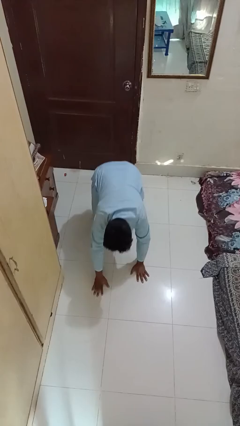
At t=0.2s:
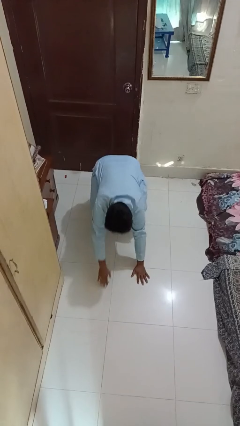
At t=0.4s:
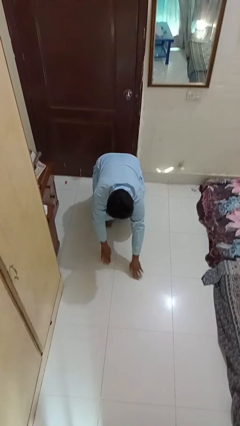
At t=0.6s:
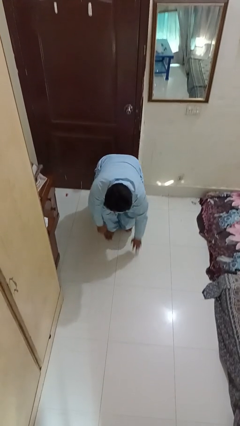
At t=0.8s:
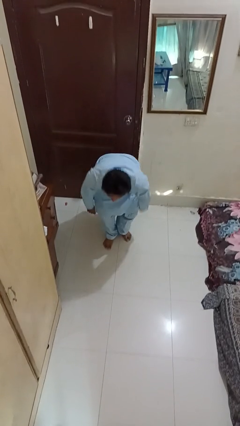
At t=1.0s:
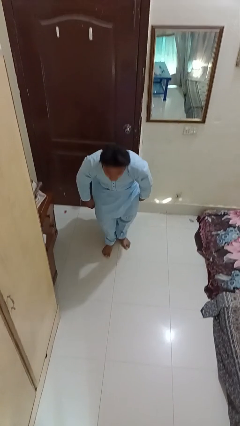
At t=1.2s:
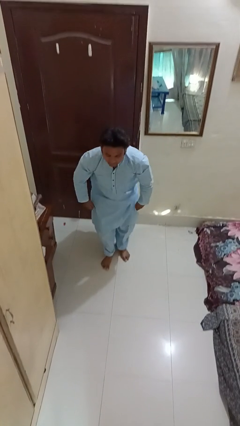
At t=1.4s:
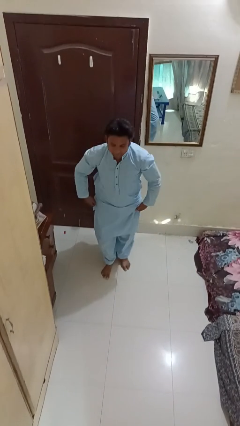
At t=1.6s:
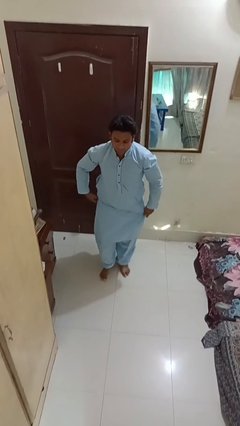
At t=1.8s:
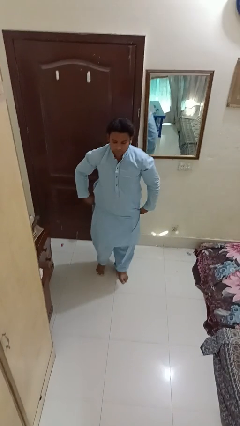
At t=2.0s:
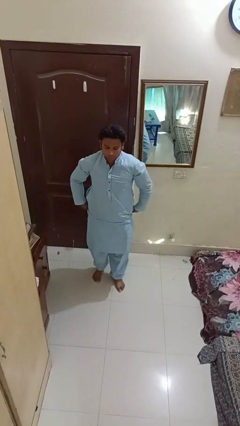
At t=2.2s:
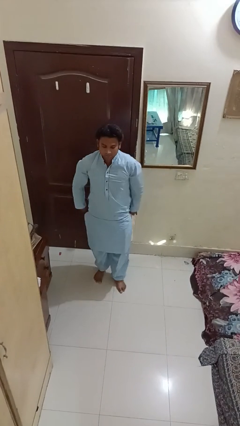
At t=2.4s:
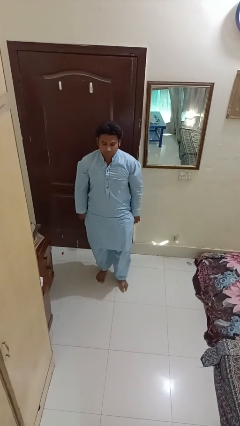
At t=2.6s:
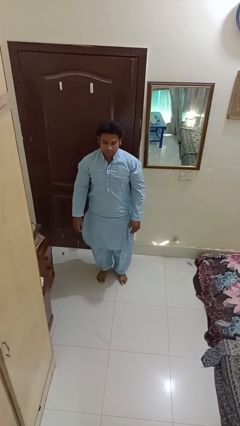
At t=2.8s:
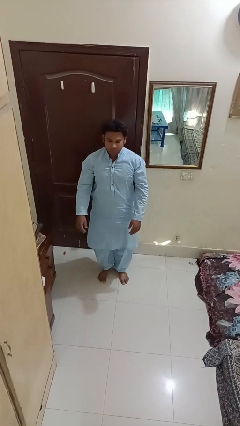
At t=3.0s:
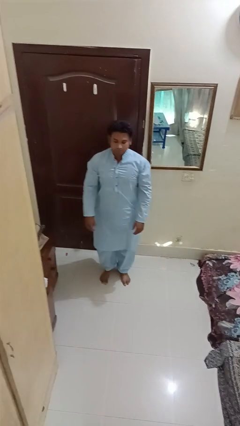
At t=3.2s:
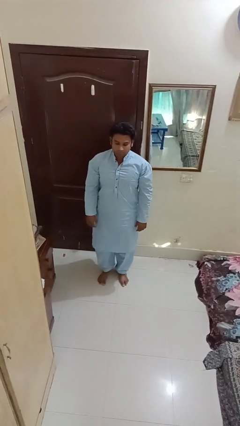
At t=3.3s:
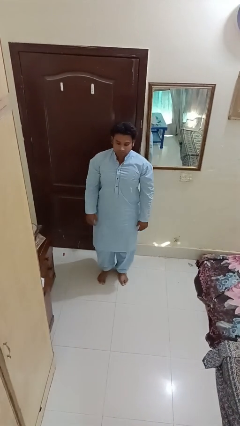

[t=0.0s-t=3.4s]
person stands up from floor

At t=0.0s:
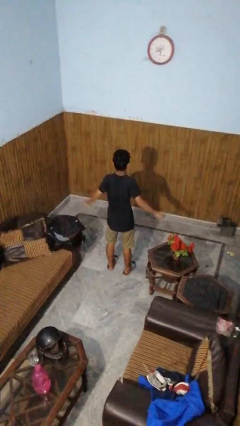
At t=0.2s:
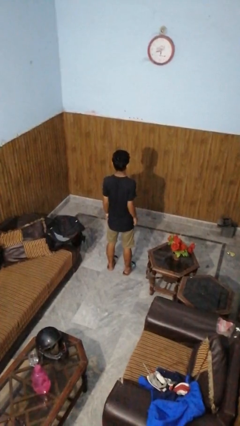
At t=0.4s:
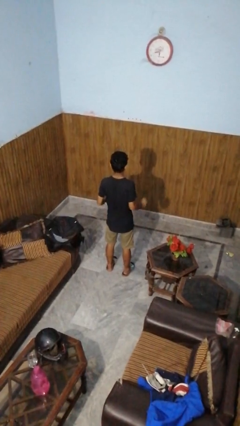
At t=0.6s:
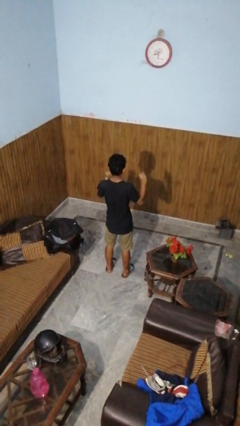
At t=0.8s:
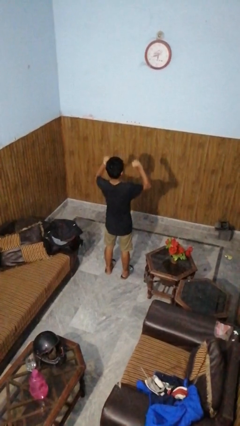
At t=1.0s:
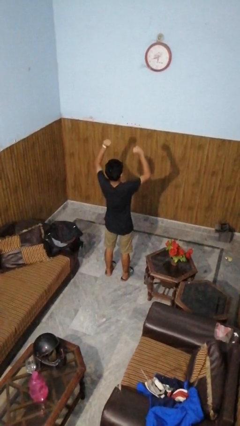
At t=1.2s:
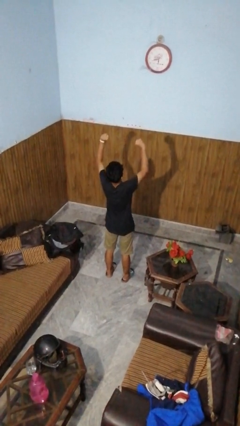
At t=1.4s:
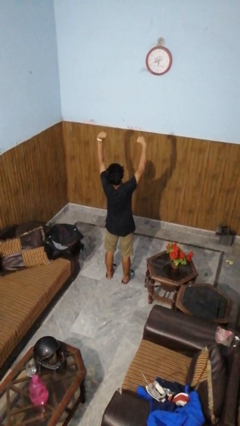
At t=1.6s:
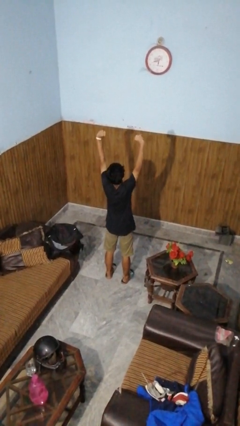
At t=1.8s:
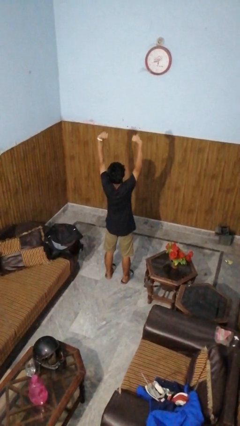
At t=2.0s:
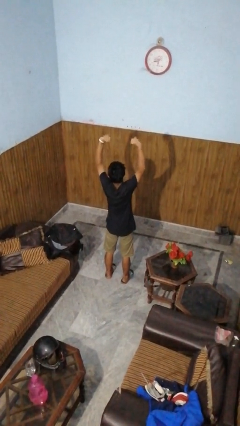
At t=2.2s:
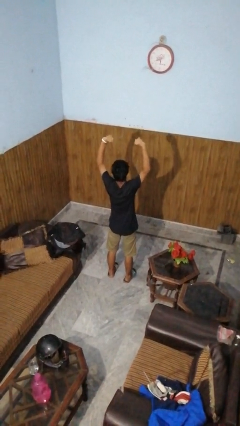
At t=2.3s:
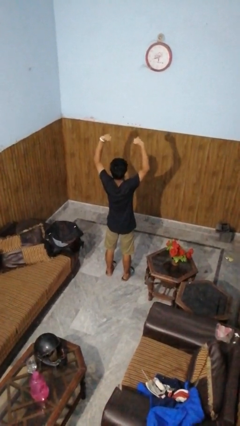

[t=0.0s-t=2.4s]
person stretches arms over head

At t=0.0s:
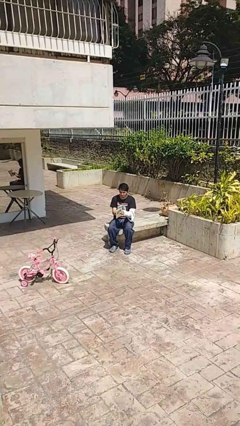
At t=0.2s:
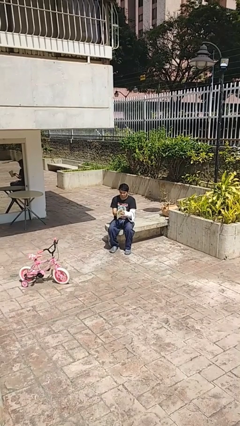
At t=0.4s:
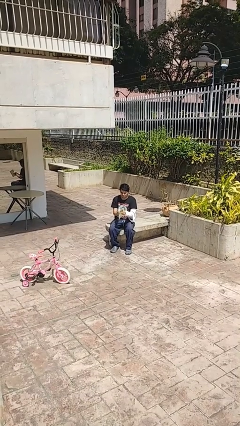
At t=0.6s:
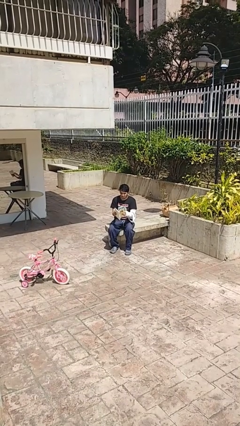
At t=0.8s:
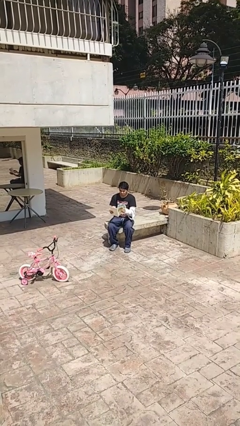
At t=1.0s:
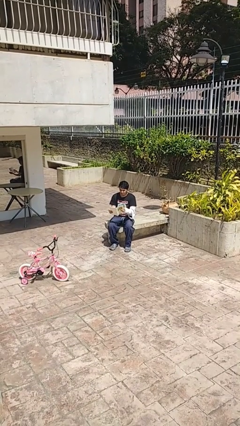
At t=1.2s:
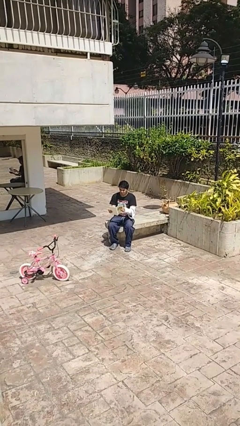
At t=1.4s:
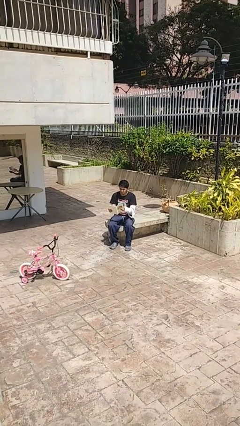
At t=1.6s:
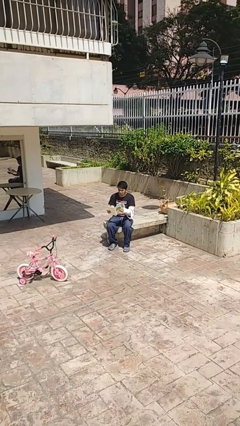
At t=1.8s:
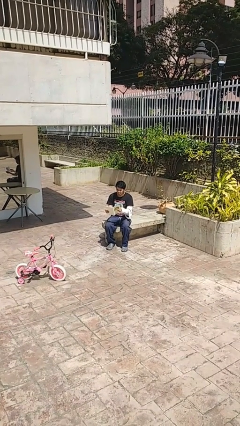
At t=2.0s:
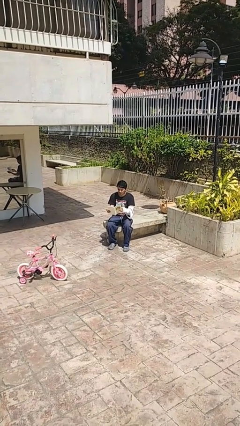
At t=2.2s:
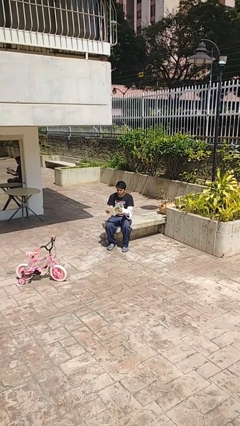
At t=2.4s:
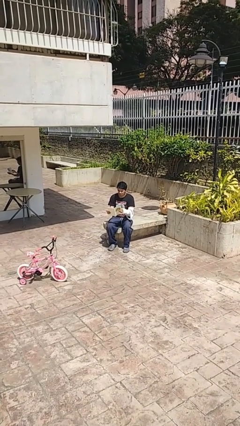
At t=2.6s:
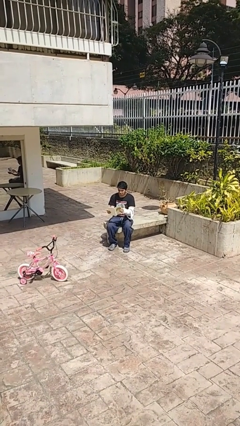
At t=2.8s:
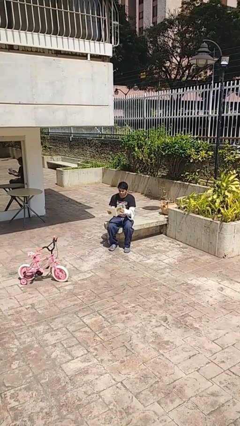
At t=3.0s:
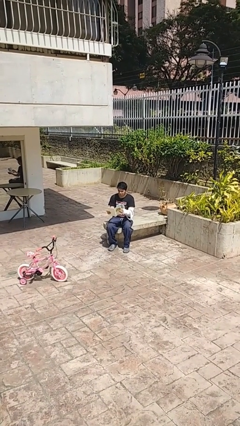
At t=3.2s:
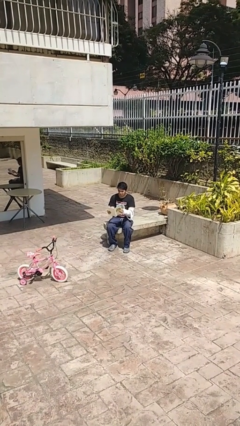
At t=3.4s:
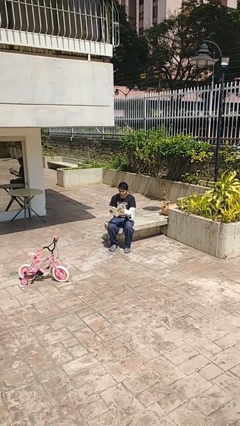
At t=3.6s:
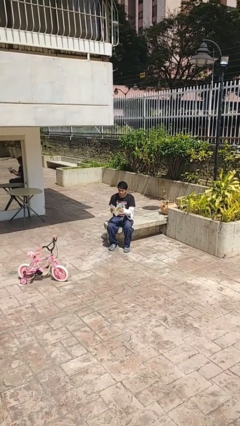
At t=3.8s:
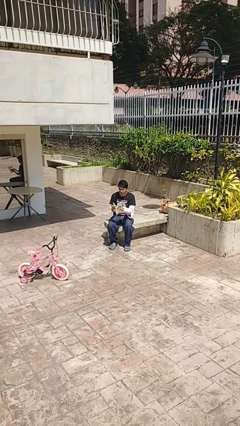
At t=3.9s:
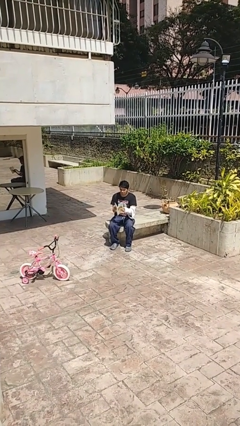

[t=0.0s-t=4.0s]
person reads document

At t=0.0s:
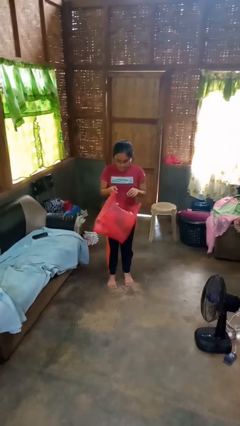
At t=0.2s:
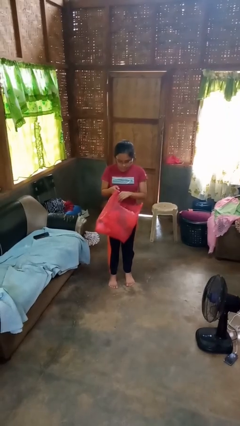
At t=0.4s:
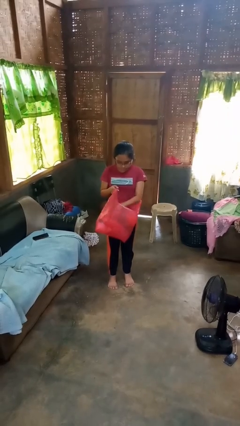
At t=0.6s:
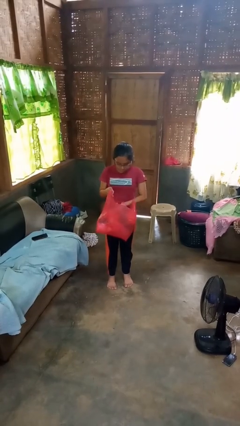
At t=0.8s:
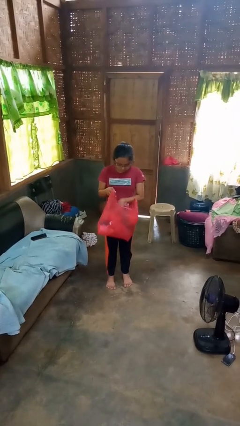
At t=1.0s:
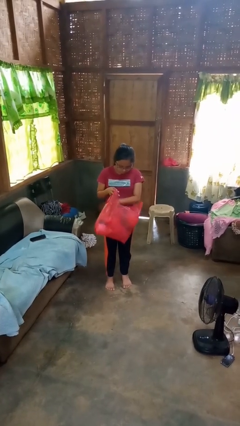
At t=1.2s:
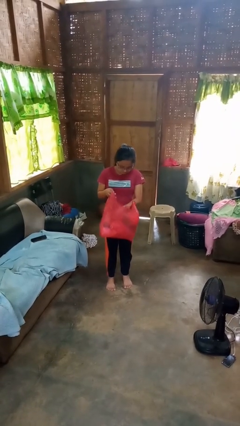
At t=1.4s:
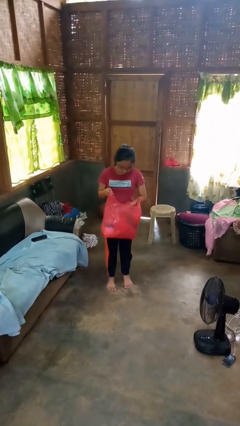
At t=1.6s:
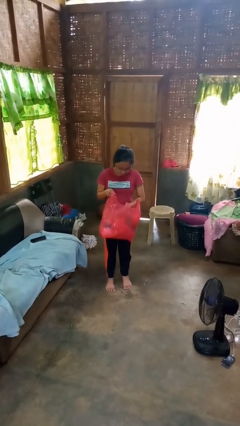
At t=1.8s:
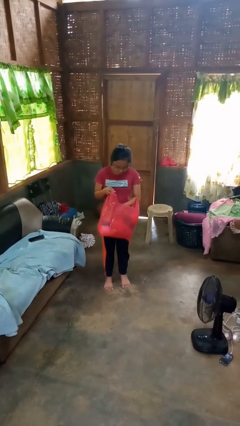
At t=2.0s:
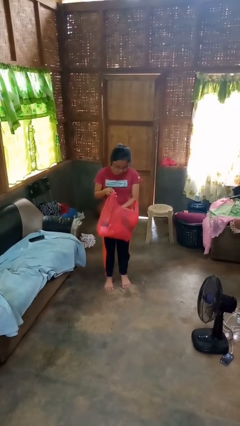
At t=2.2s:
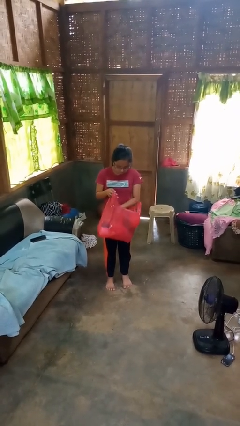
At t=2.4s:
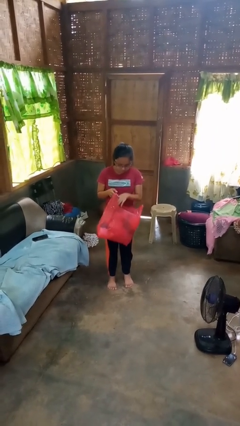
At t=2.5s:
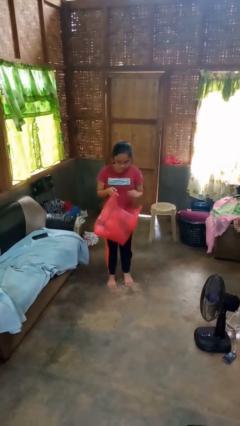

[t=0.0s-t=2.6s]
person searches in bag

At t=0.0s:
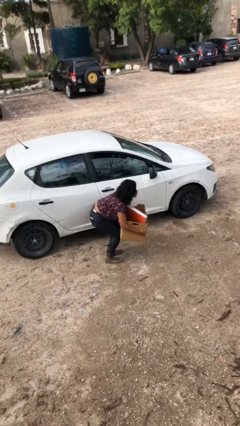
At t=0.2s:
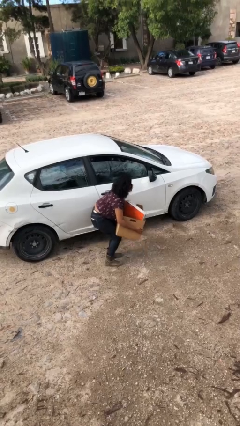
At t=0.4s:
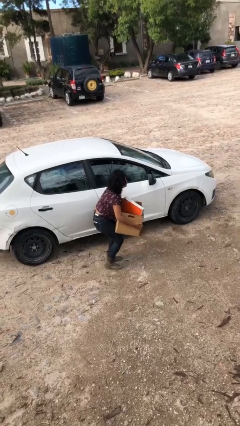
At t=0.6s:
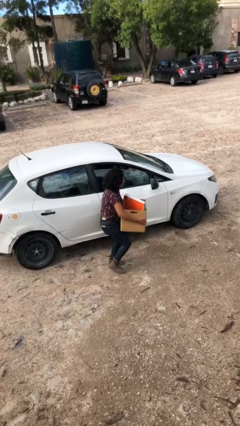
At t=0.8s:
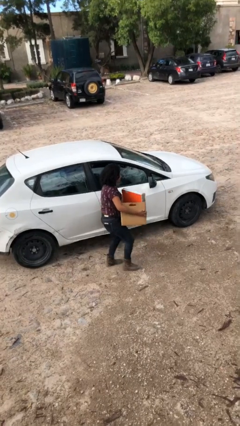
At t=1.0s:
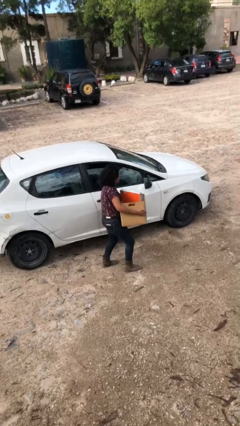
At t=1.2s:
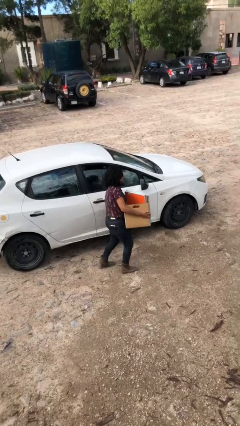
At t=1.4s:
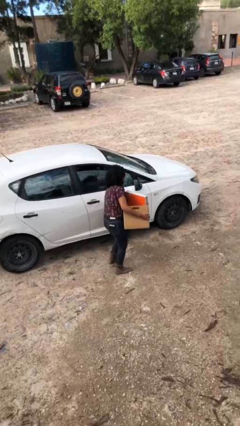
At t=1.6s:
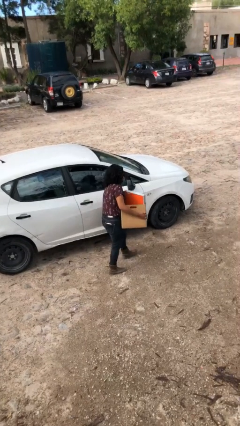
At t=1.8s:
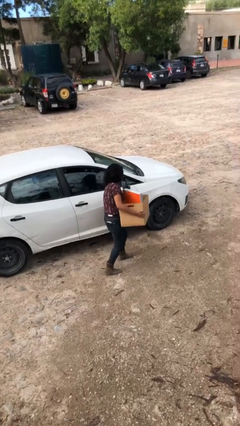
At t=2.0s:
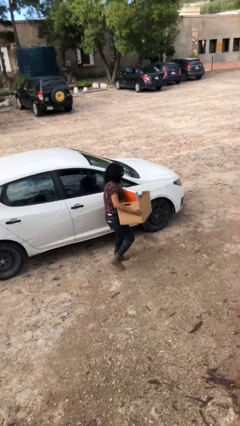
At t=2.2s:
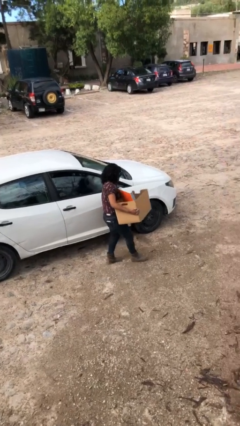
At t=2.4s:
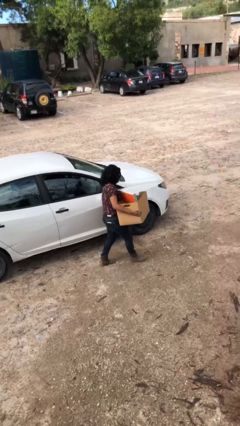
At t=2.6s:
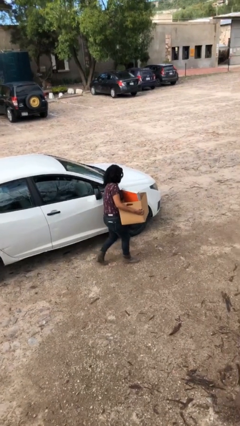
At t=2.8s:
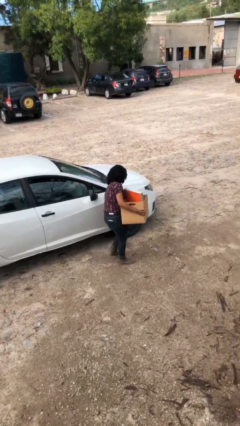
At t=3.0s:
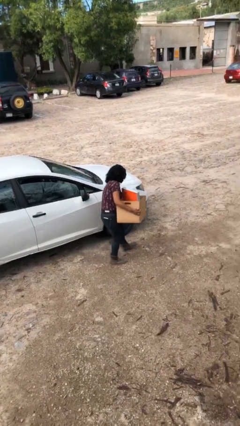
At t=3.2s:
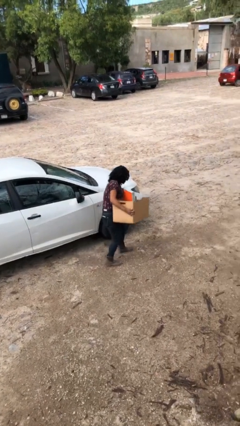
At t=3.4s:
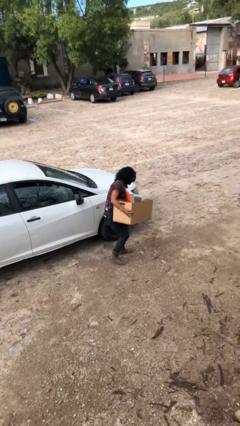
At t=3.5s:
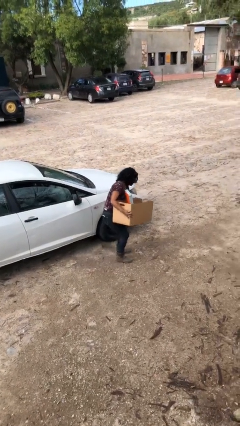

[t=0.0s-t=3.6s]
person carries heavy object

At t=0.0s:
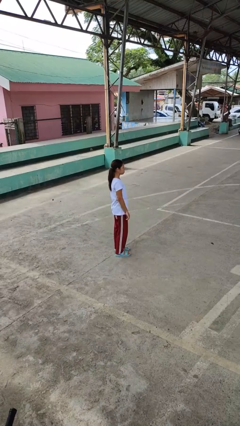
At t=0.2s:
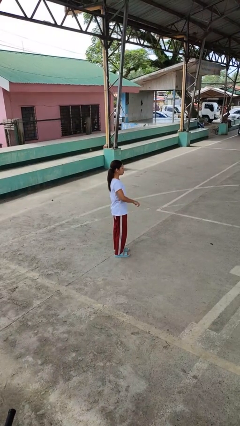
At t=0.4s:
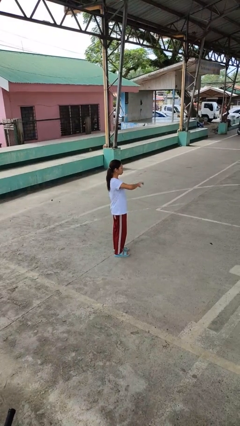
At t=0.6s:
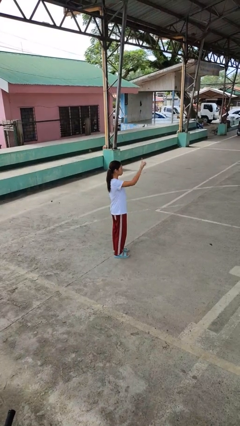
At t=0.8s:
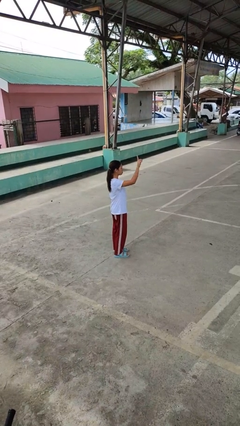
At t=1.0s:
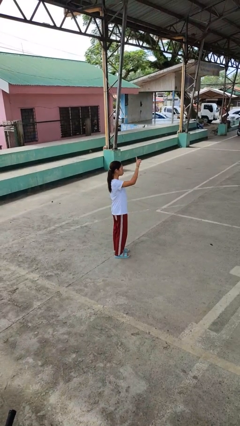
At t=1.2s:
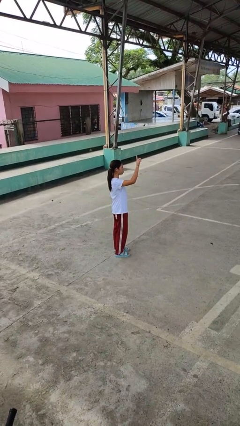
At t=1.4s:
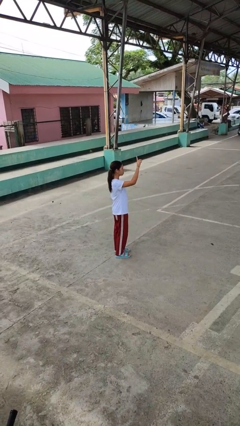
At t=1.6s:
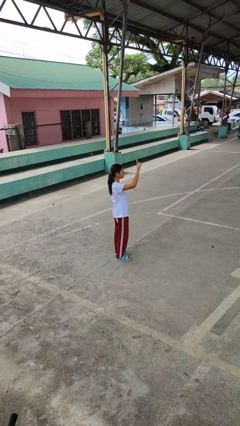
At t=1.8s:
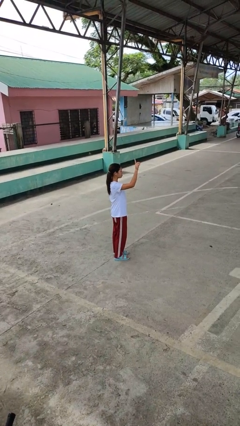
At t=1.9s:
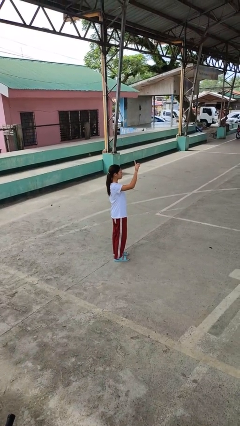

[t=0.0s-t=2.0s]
person gestures swipe up
